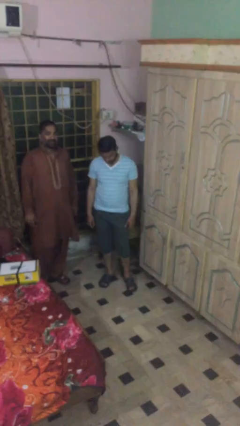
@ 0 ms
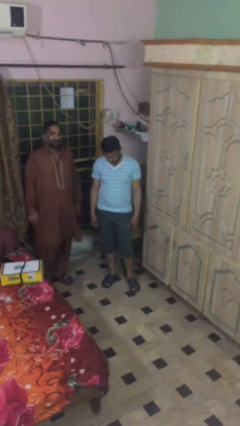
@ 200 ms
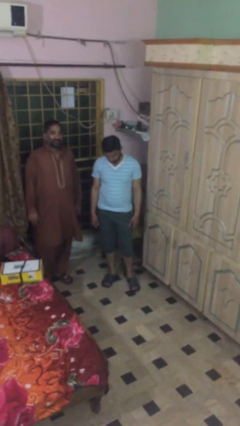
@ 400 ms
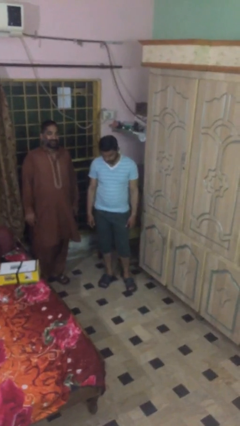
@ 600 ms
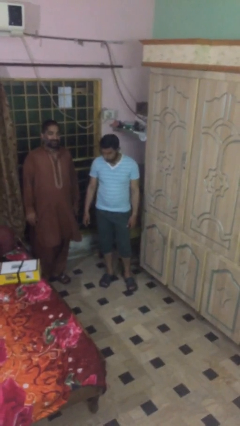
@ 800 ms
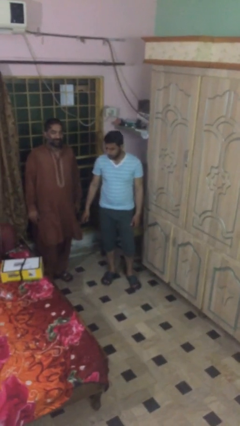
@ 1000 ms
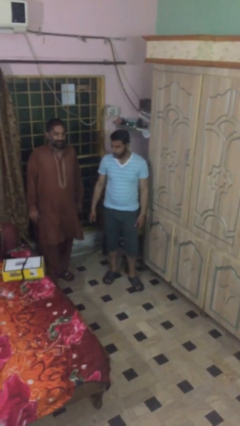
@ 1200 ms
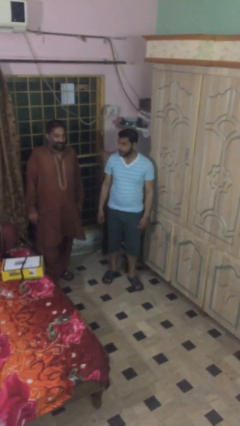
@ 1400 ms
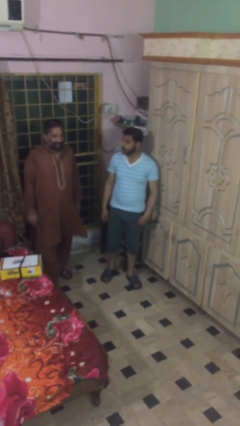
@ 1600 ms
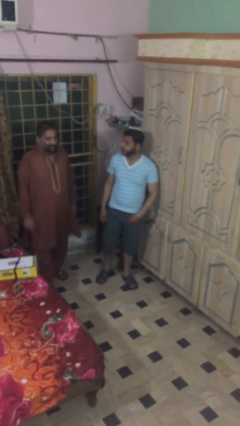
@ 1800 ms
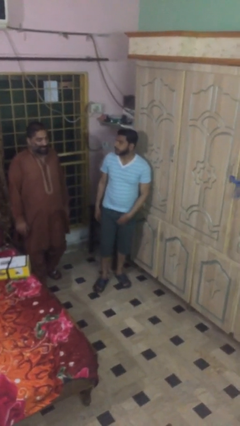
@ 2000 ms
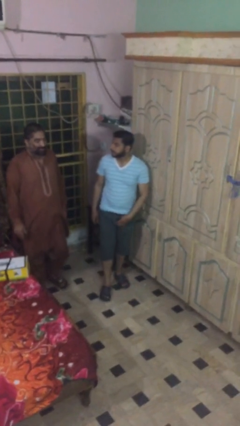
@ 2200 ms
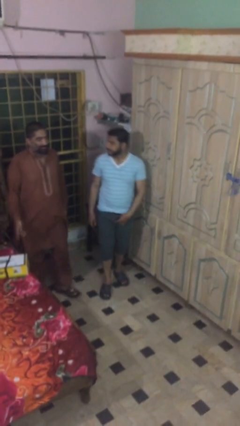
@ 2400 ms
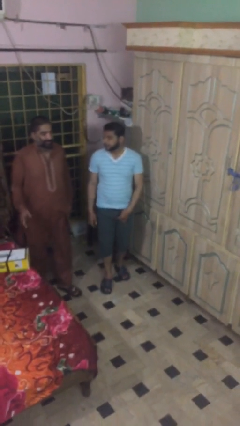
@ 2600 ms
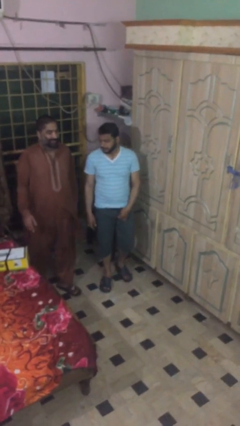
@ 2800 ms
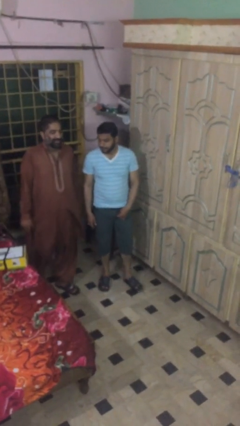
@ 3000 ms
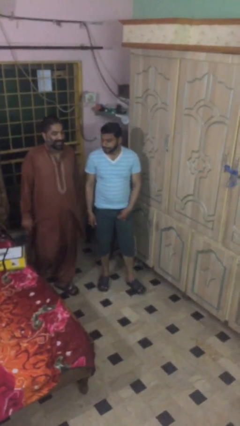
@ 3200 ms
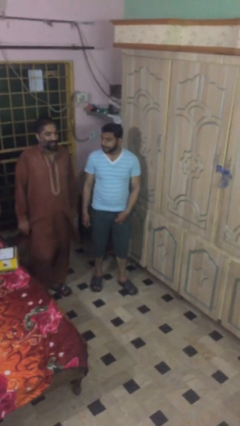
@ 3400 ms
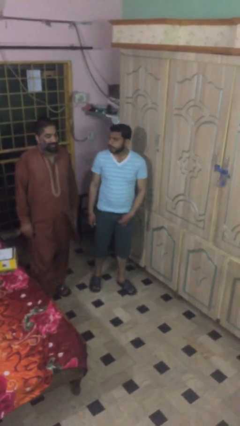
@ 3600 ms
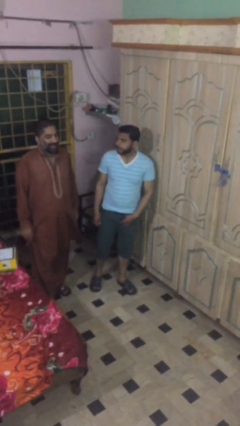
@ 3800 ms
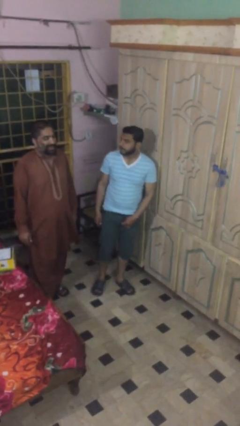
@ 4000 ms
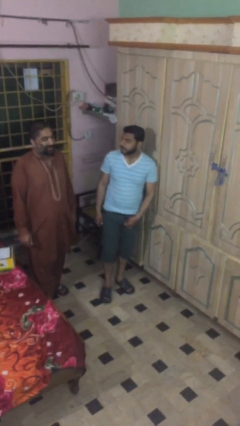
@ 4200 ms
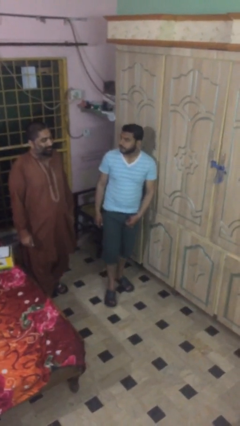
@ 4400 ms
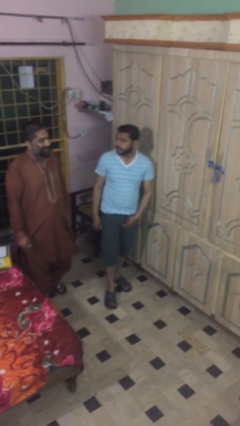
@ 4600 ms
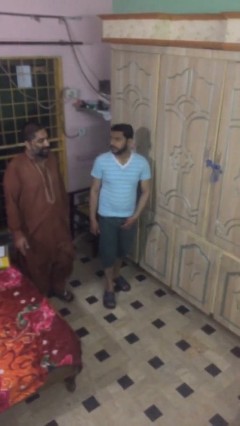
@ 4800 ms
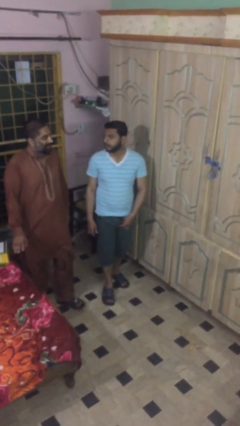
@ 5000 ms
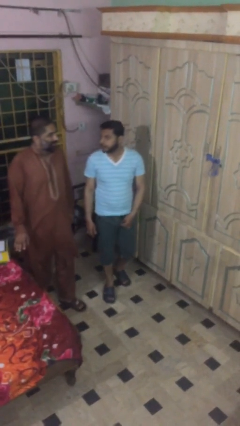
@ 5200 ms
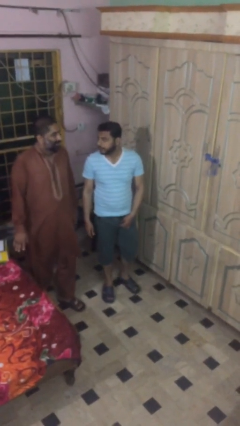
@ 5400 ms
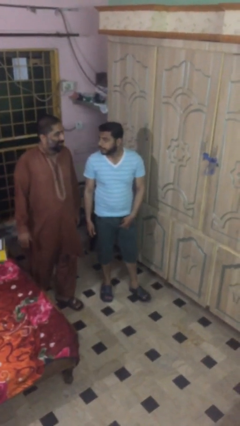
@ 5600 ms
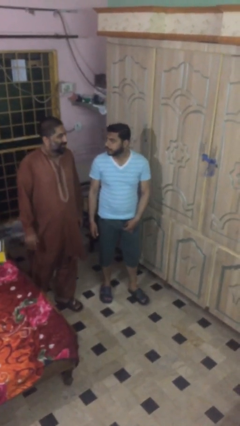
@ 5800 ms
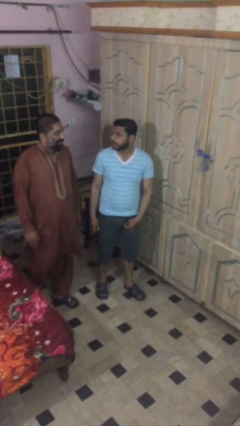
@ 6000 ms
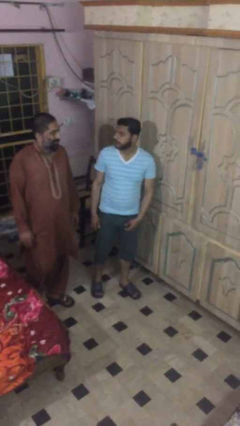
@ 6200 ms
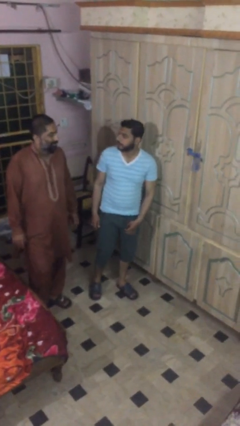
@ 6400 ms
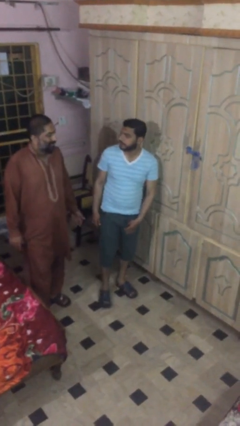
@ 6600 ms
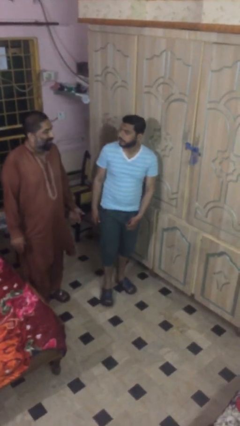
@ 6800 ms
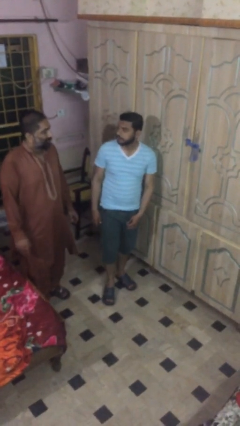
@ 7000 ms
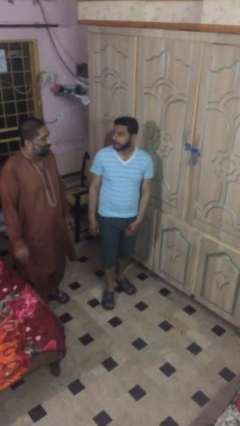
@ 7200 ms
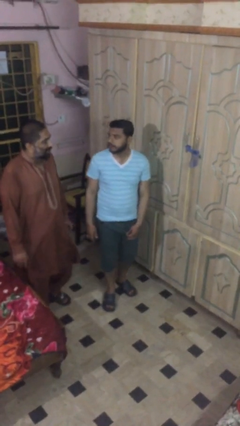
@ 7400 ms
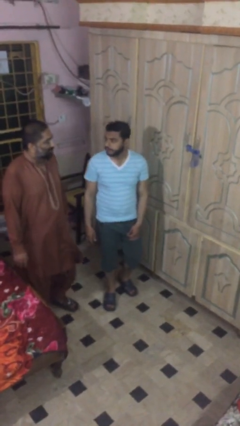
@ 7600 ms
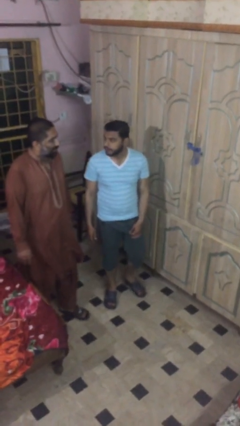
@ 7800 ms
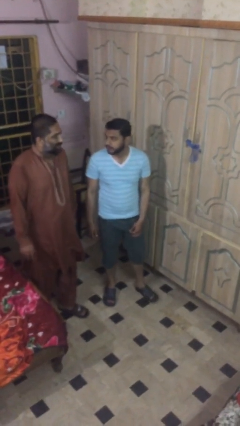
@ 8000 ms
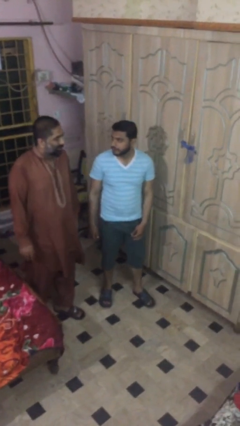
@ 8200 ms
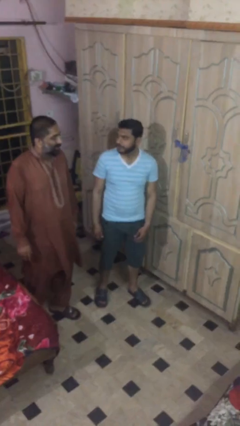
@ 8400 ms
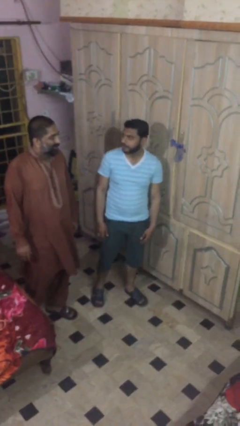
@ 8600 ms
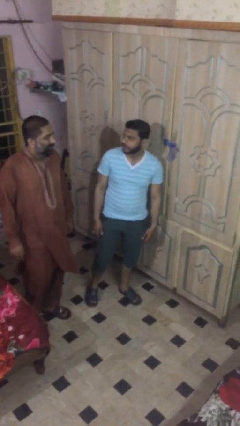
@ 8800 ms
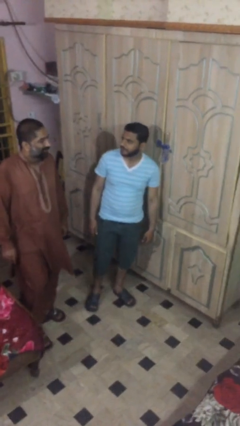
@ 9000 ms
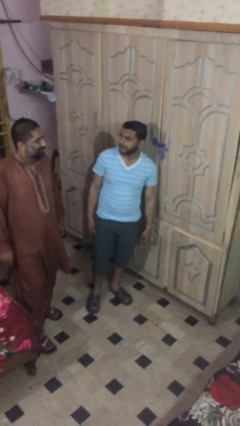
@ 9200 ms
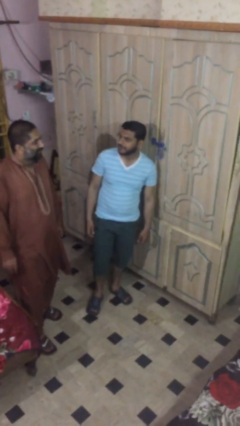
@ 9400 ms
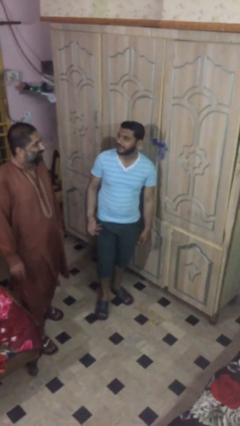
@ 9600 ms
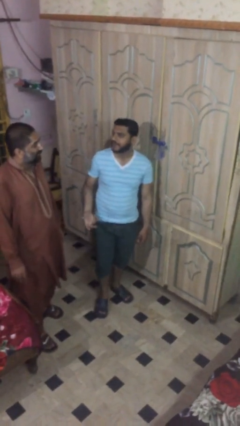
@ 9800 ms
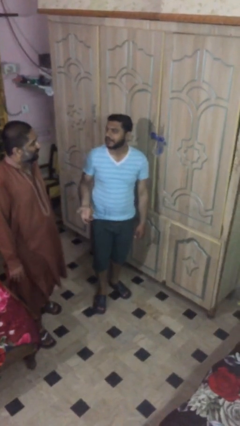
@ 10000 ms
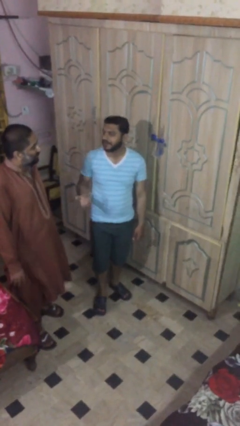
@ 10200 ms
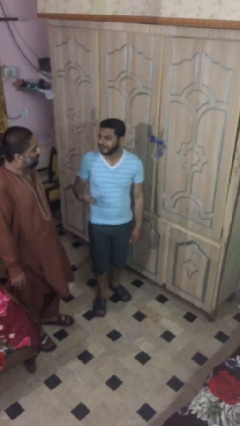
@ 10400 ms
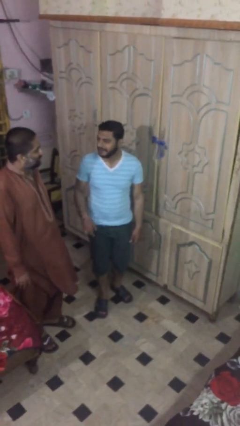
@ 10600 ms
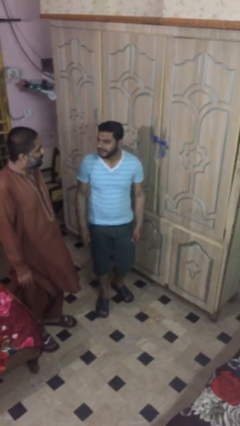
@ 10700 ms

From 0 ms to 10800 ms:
person talks to person

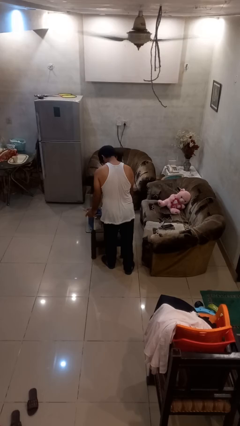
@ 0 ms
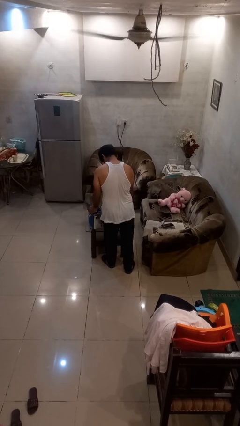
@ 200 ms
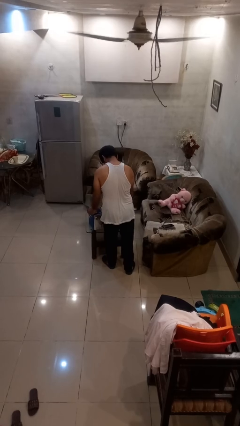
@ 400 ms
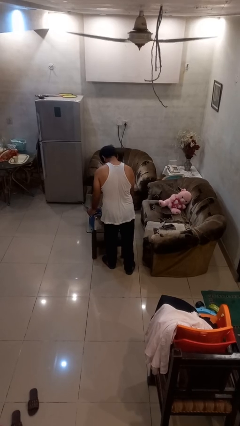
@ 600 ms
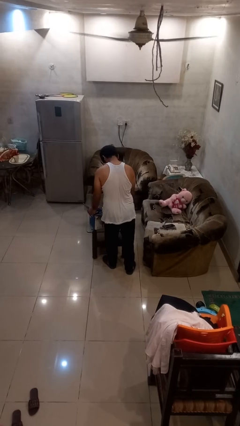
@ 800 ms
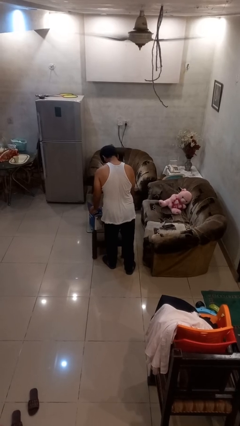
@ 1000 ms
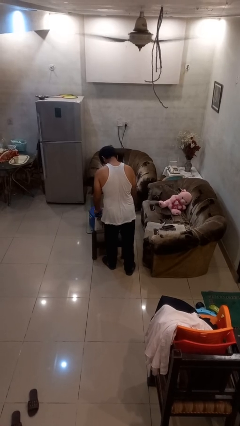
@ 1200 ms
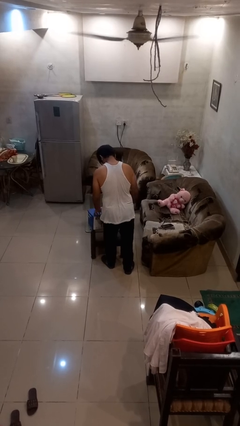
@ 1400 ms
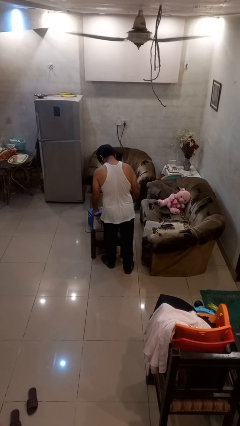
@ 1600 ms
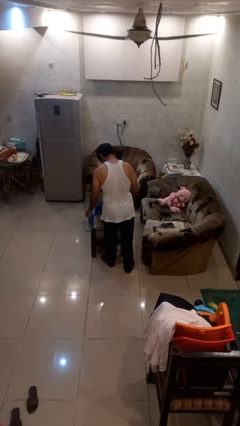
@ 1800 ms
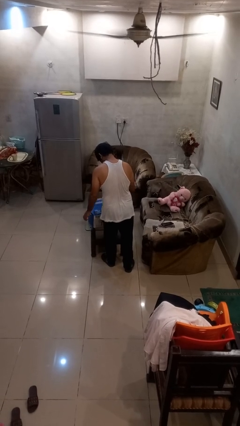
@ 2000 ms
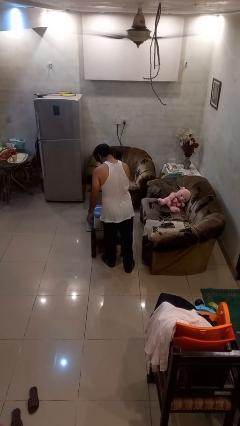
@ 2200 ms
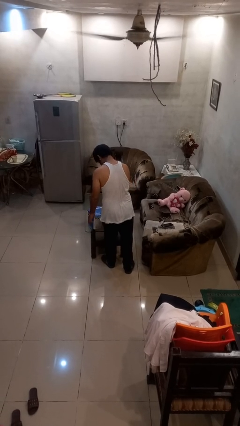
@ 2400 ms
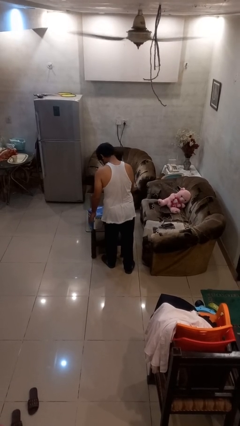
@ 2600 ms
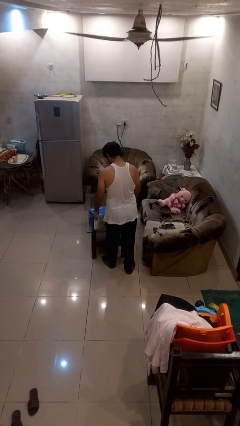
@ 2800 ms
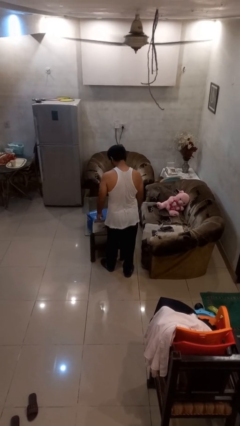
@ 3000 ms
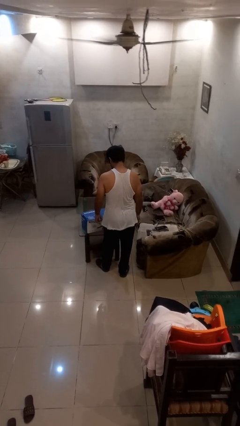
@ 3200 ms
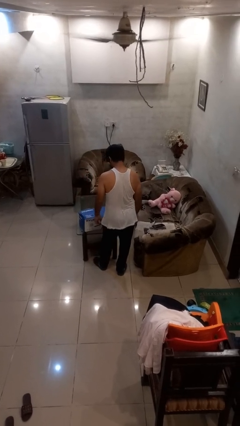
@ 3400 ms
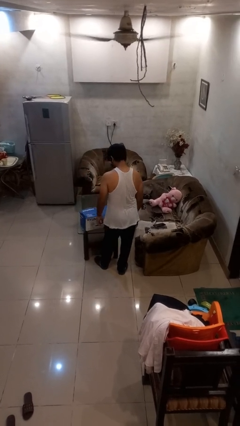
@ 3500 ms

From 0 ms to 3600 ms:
person closes box

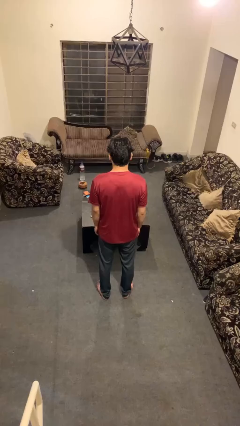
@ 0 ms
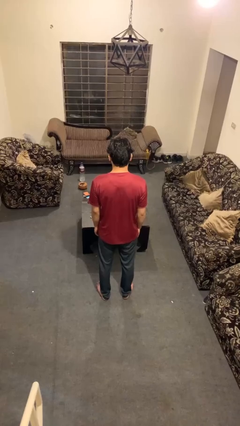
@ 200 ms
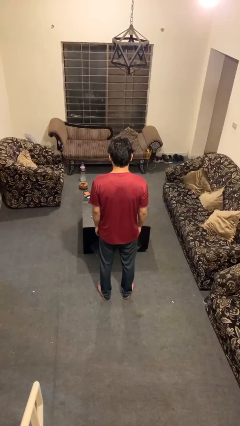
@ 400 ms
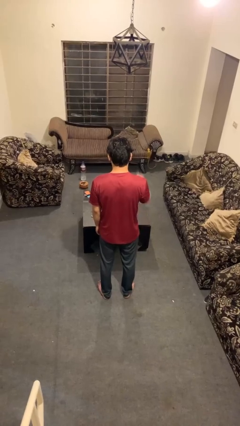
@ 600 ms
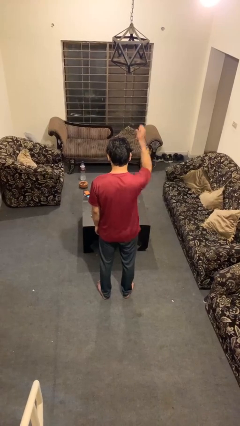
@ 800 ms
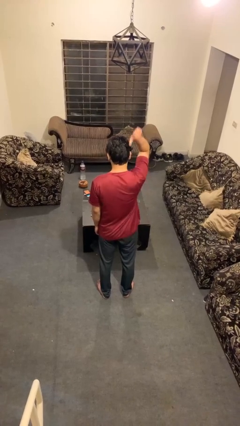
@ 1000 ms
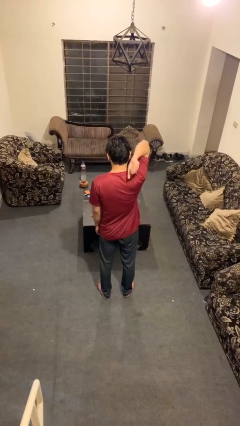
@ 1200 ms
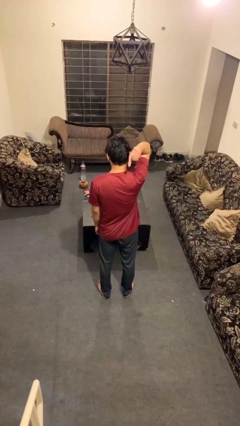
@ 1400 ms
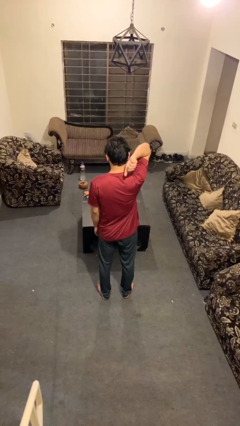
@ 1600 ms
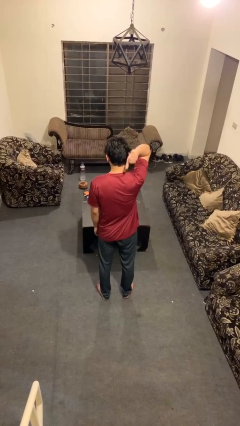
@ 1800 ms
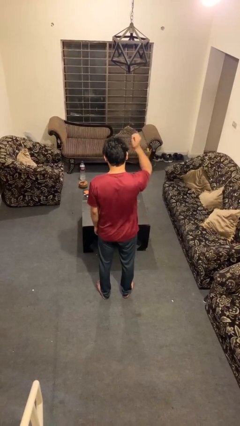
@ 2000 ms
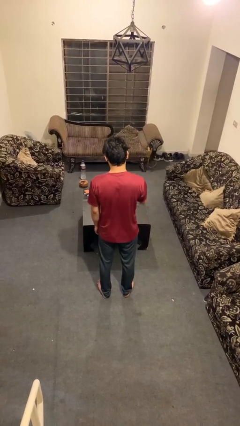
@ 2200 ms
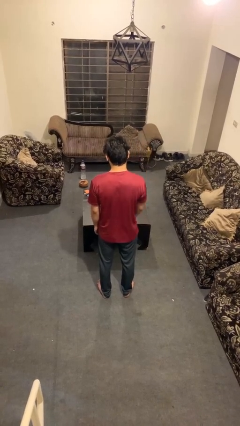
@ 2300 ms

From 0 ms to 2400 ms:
person gestures behind me

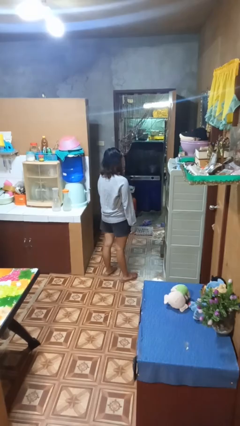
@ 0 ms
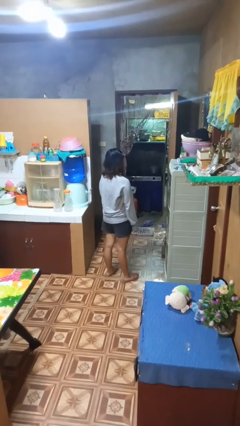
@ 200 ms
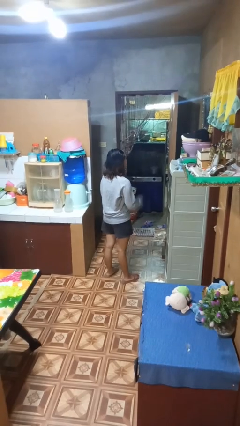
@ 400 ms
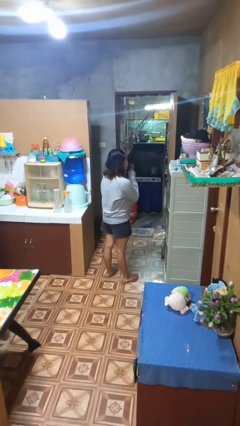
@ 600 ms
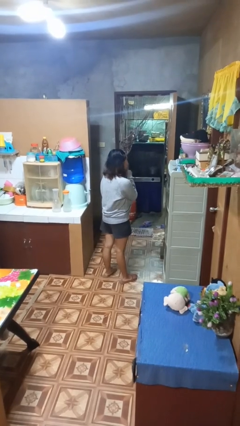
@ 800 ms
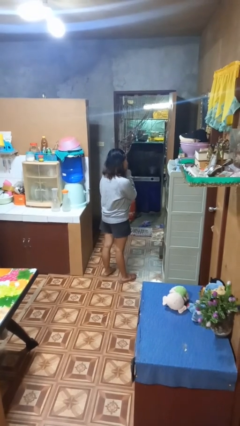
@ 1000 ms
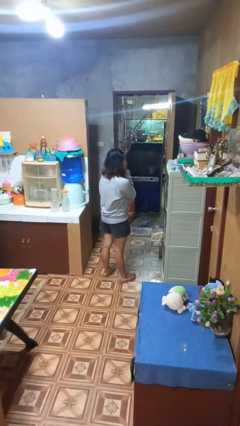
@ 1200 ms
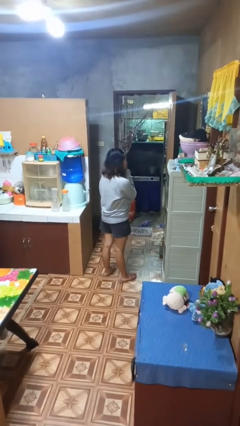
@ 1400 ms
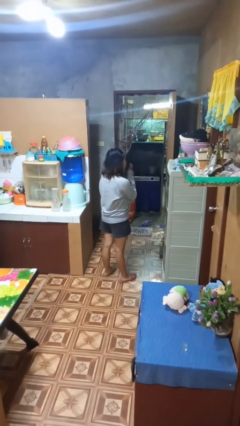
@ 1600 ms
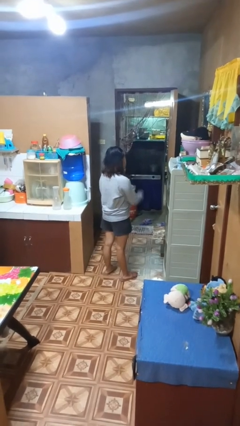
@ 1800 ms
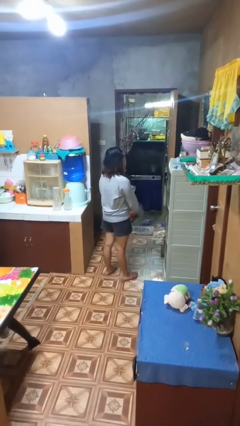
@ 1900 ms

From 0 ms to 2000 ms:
person gestures be quiet
